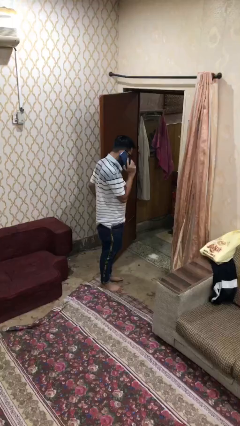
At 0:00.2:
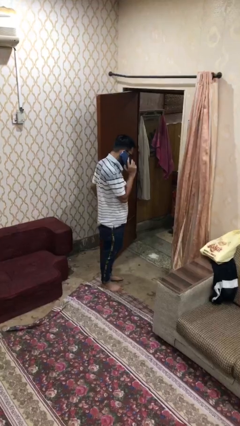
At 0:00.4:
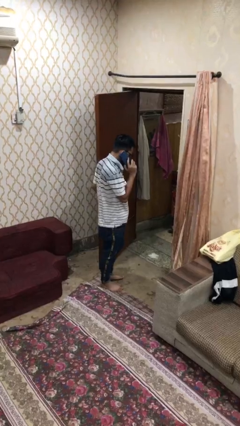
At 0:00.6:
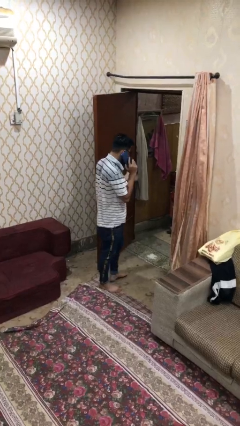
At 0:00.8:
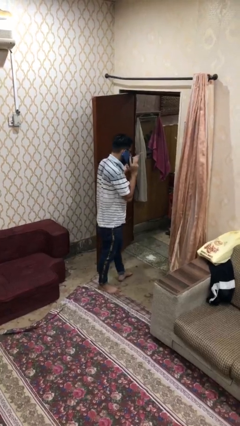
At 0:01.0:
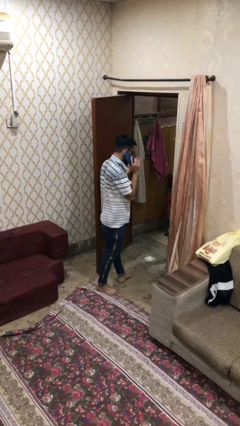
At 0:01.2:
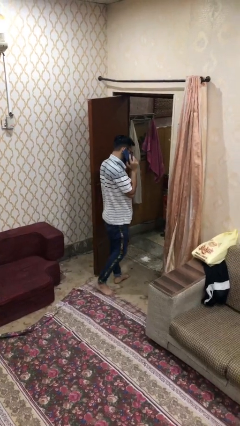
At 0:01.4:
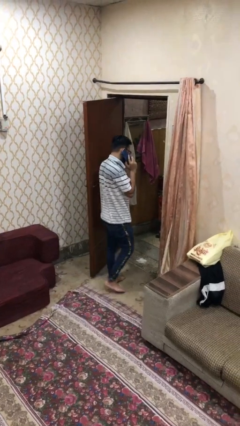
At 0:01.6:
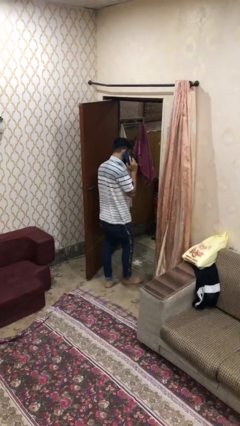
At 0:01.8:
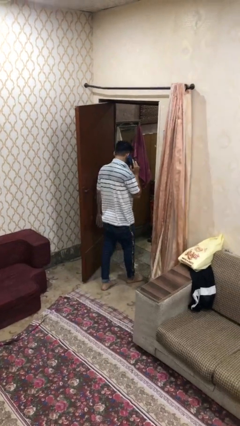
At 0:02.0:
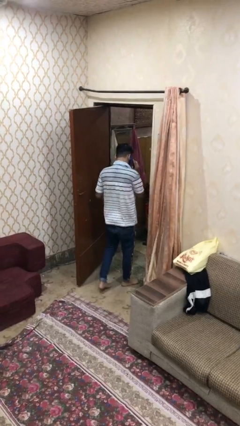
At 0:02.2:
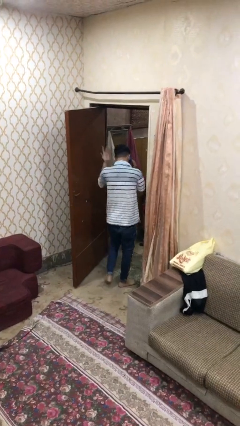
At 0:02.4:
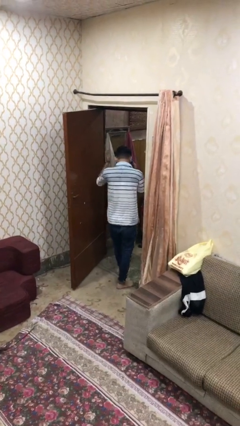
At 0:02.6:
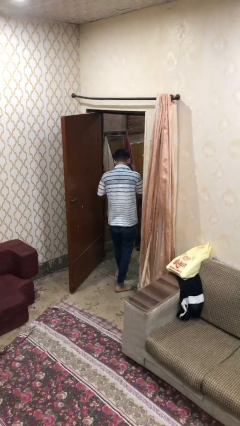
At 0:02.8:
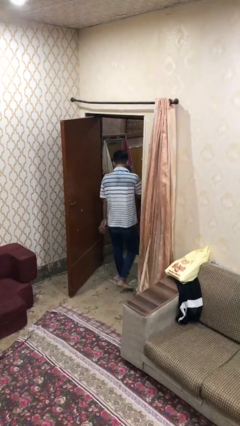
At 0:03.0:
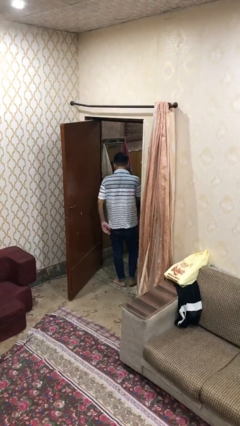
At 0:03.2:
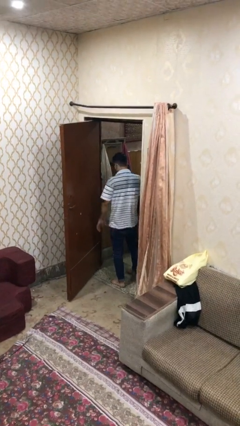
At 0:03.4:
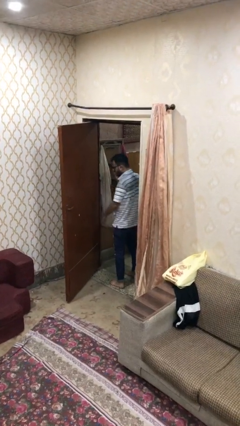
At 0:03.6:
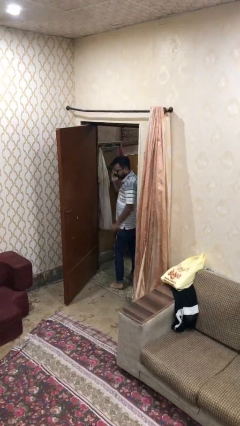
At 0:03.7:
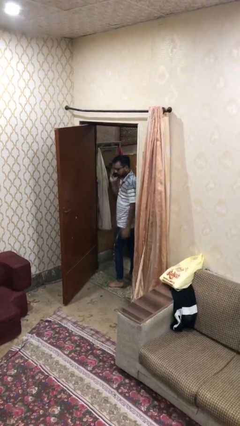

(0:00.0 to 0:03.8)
person exits scene through structure

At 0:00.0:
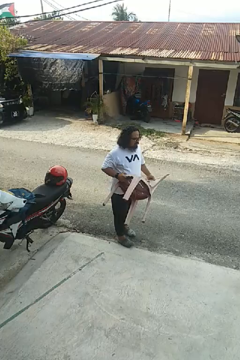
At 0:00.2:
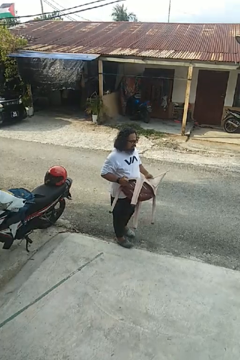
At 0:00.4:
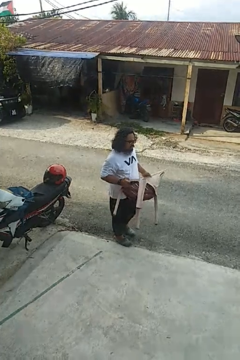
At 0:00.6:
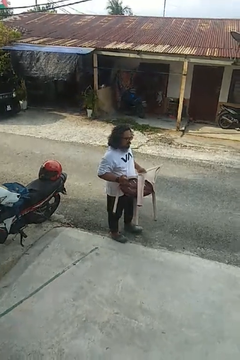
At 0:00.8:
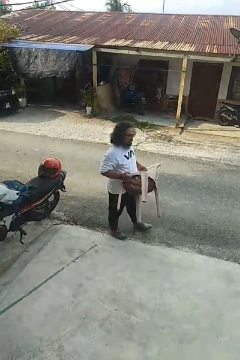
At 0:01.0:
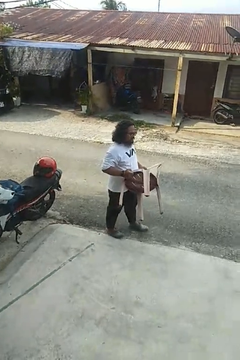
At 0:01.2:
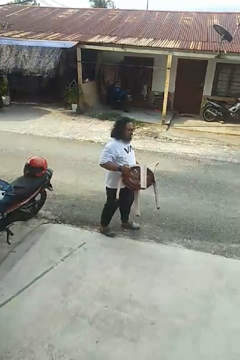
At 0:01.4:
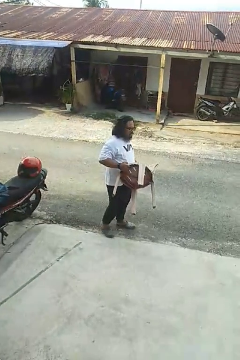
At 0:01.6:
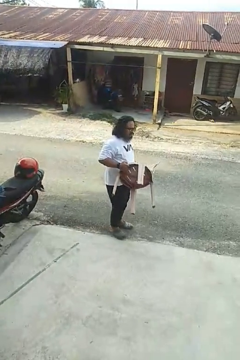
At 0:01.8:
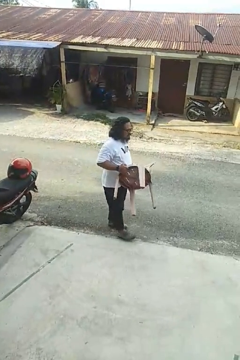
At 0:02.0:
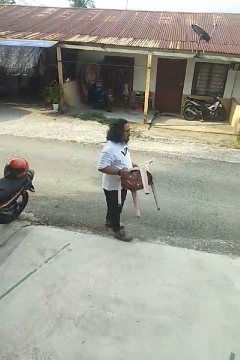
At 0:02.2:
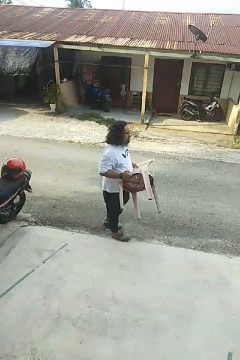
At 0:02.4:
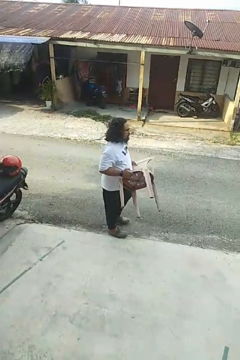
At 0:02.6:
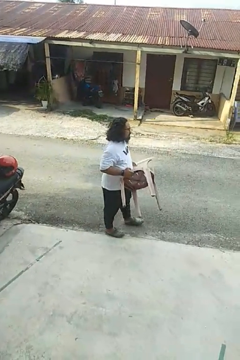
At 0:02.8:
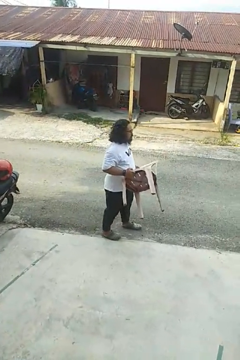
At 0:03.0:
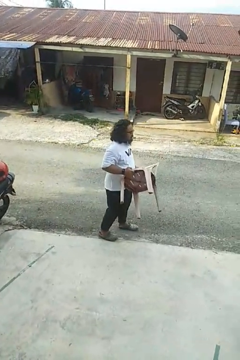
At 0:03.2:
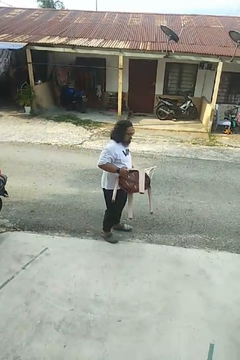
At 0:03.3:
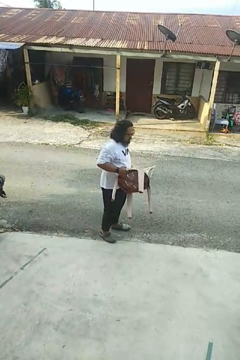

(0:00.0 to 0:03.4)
person carries furniture

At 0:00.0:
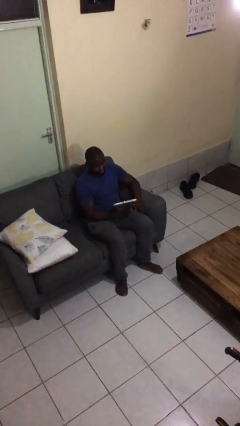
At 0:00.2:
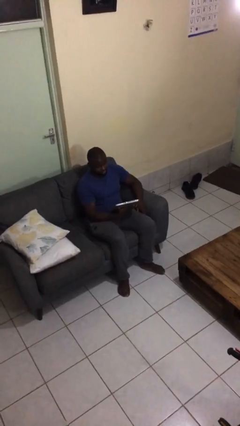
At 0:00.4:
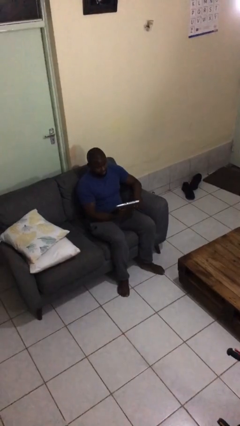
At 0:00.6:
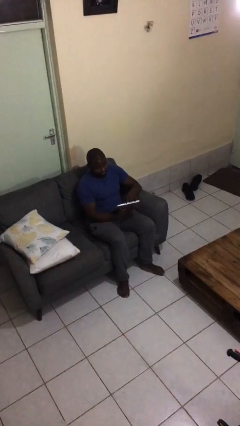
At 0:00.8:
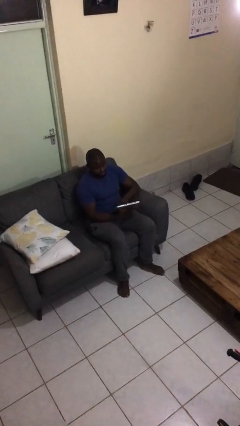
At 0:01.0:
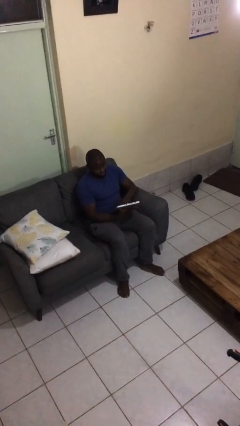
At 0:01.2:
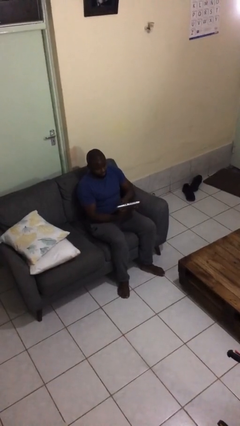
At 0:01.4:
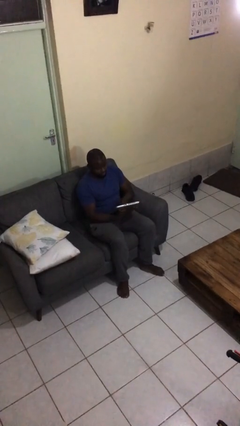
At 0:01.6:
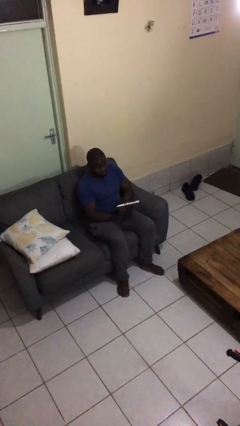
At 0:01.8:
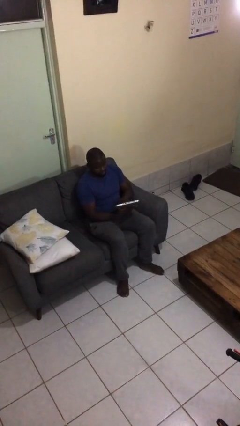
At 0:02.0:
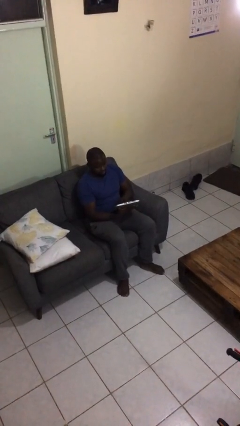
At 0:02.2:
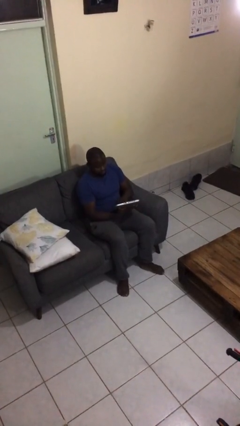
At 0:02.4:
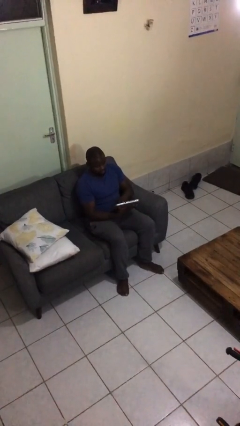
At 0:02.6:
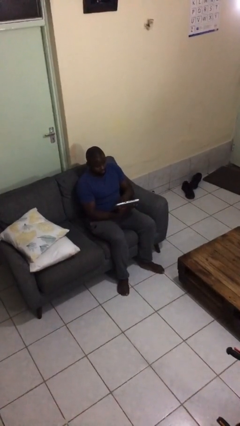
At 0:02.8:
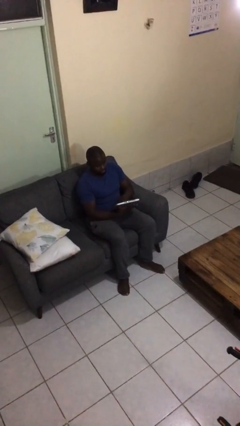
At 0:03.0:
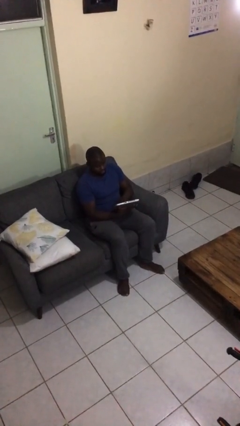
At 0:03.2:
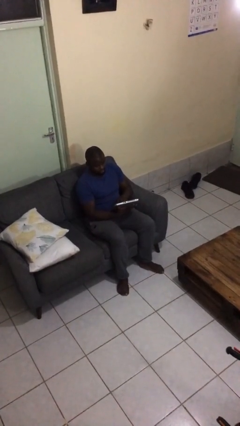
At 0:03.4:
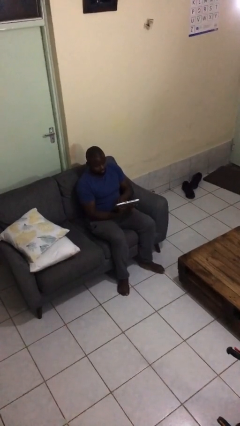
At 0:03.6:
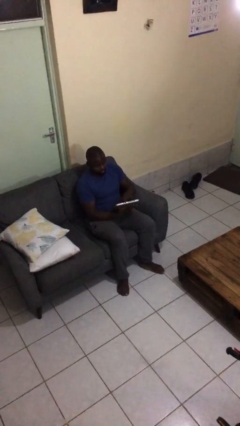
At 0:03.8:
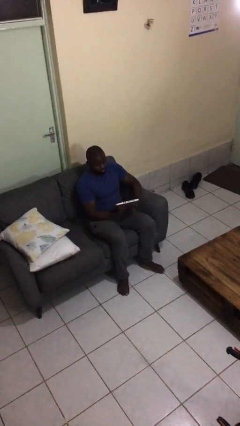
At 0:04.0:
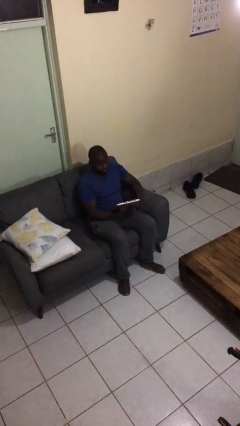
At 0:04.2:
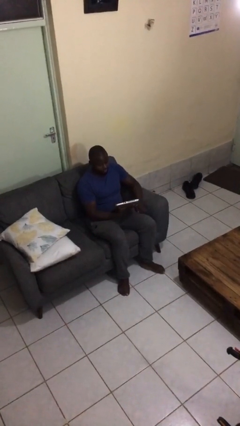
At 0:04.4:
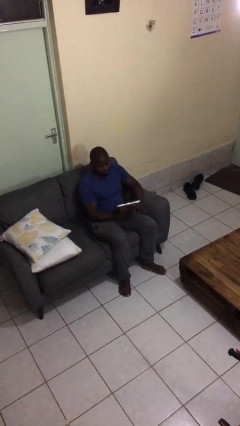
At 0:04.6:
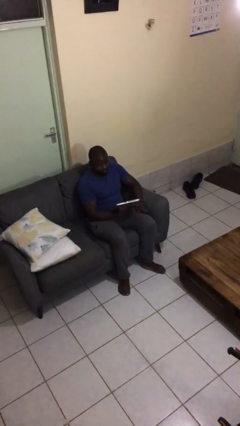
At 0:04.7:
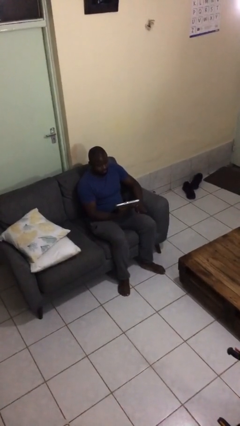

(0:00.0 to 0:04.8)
person interacts with tablet

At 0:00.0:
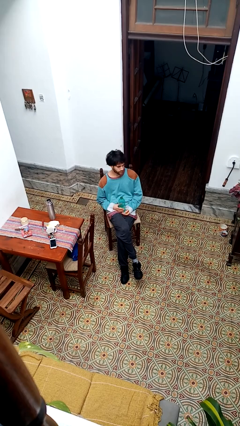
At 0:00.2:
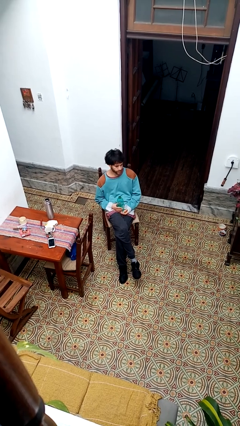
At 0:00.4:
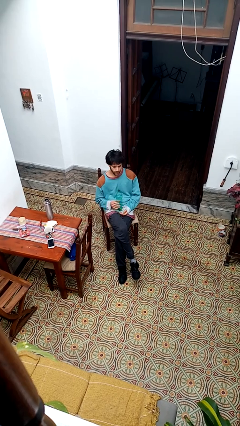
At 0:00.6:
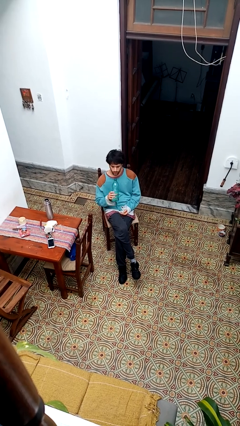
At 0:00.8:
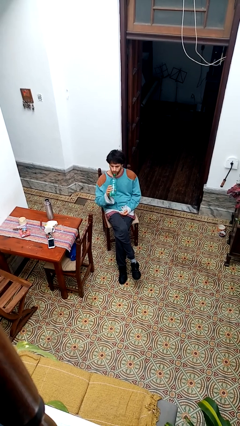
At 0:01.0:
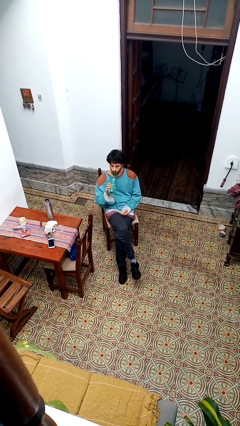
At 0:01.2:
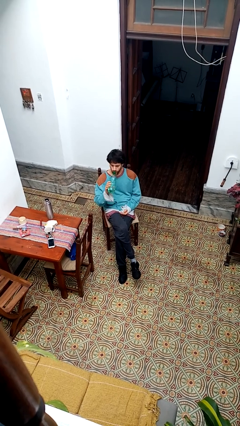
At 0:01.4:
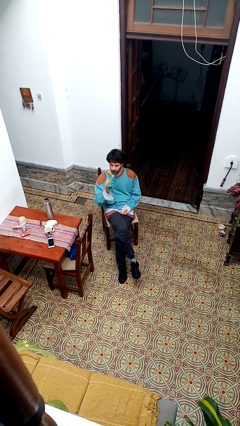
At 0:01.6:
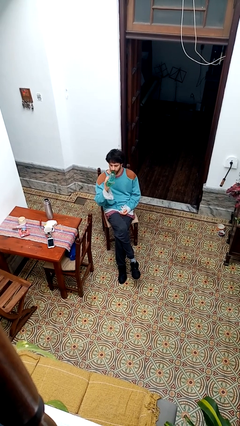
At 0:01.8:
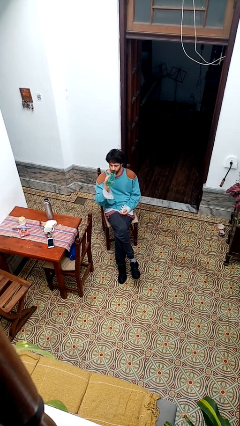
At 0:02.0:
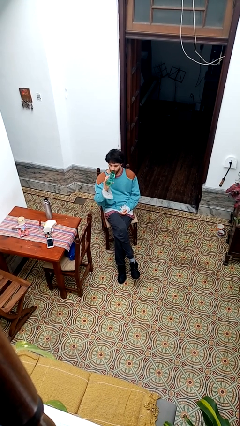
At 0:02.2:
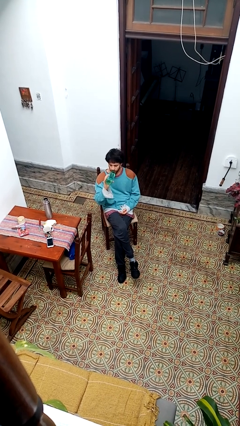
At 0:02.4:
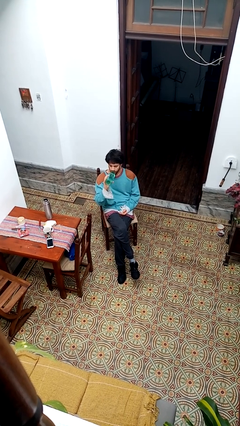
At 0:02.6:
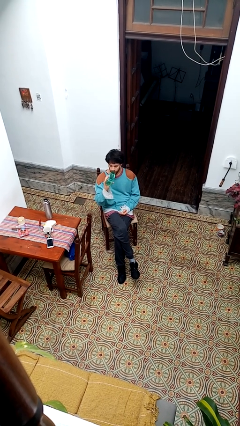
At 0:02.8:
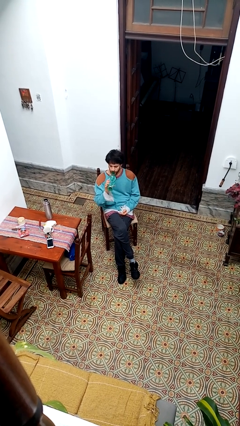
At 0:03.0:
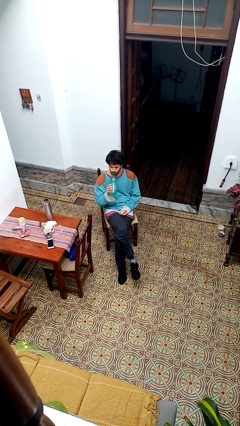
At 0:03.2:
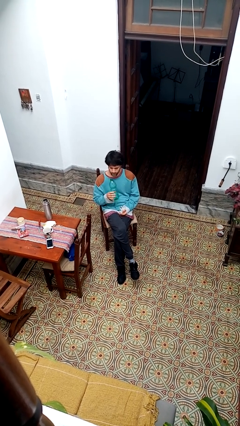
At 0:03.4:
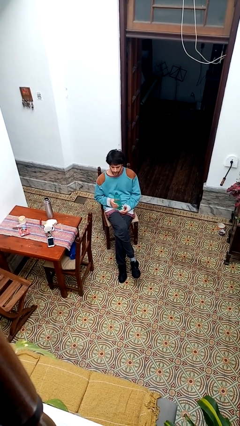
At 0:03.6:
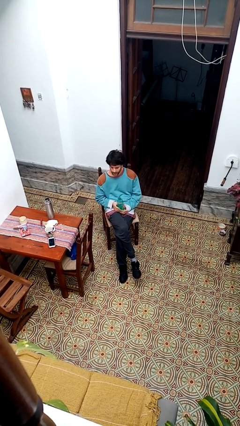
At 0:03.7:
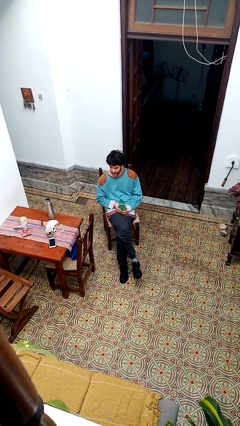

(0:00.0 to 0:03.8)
person drinks from bottle

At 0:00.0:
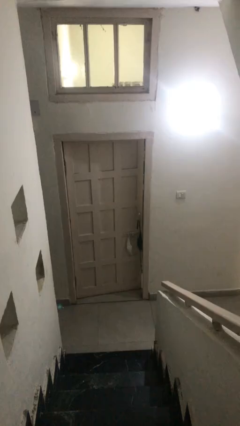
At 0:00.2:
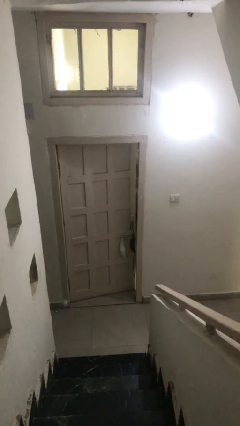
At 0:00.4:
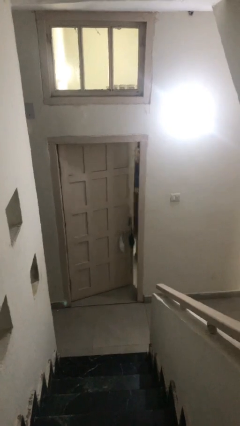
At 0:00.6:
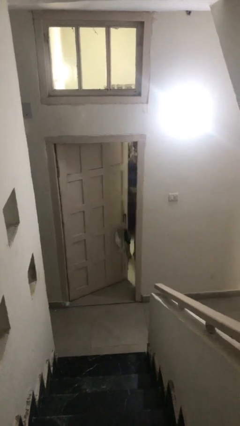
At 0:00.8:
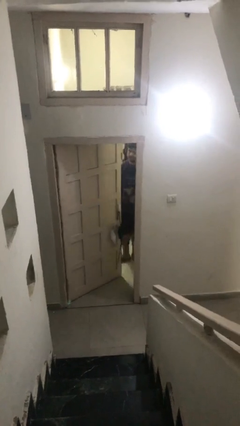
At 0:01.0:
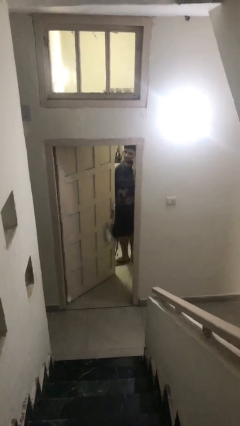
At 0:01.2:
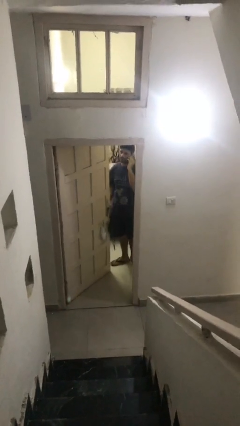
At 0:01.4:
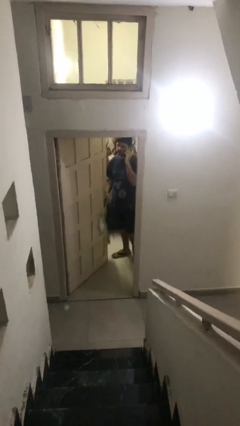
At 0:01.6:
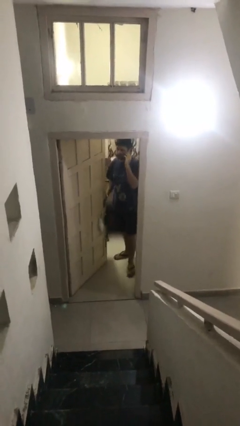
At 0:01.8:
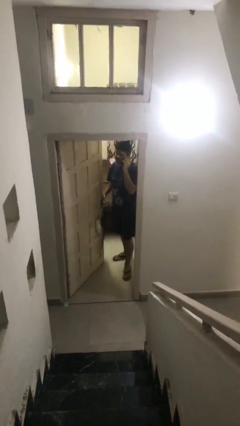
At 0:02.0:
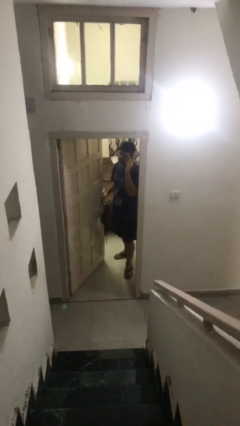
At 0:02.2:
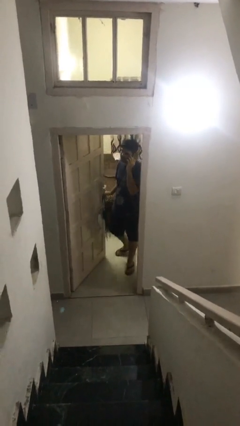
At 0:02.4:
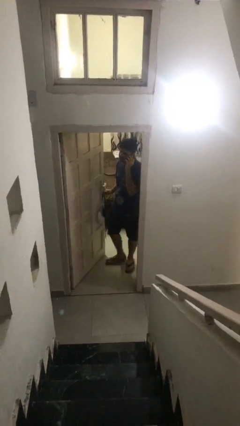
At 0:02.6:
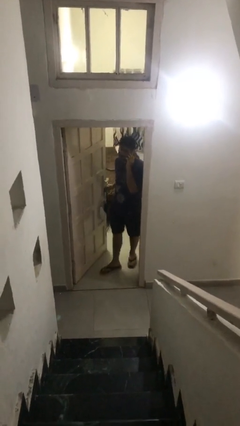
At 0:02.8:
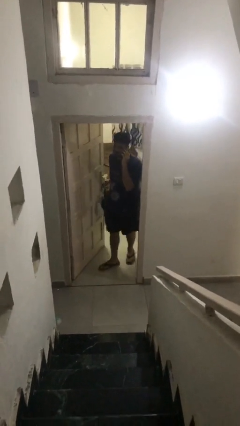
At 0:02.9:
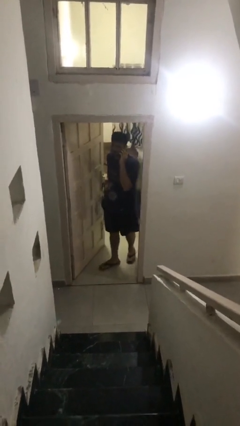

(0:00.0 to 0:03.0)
person opens facility door
